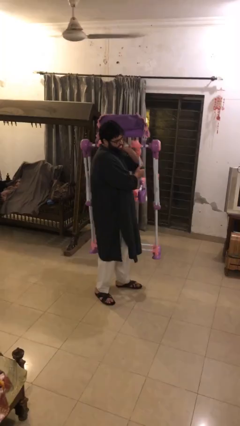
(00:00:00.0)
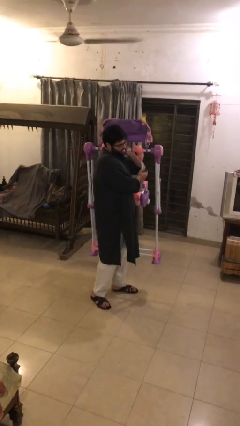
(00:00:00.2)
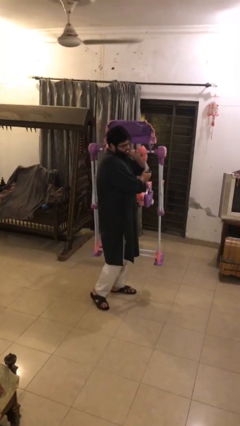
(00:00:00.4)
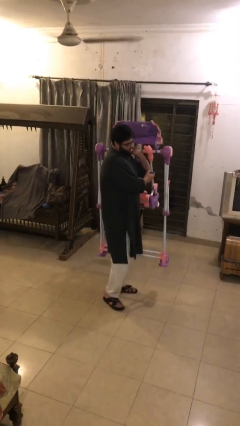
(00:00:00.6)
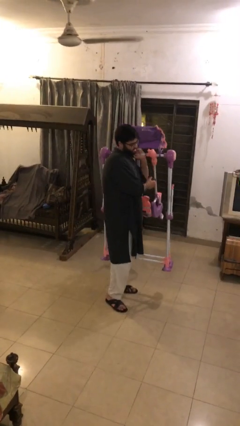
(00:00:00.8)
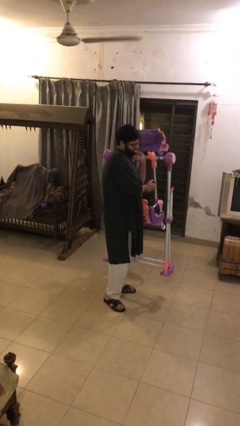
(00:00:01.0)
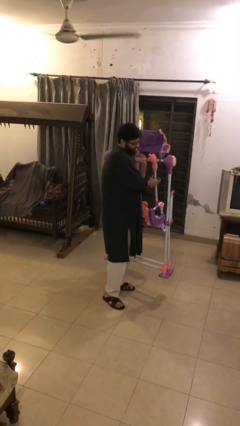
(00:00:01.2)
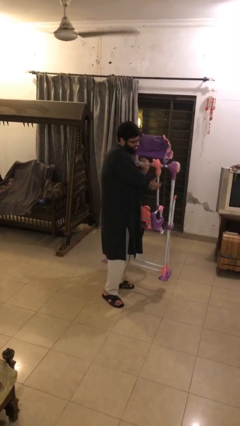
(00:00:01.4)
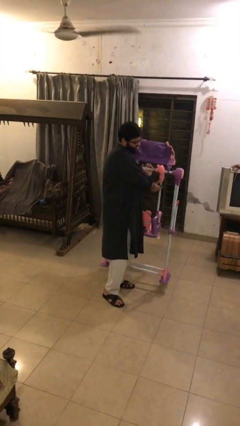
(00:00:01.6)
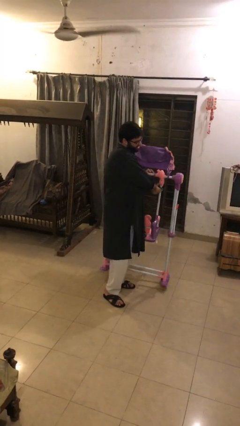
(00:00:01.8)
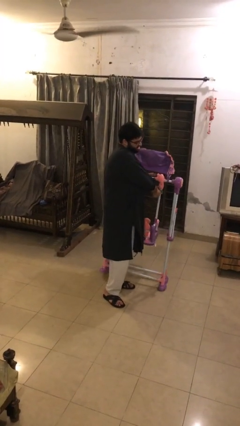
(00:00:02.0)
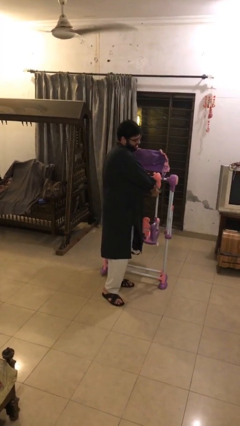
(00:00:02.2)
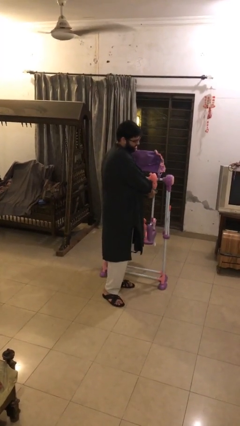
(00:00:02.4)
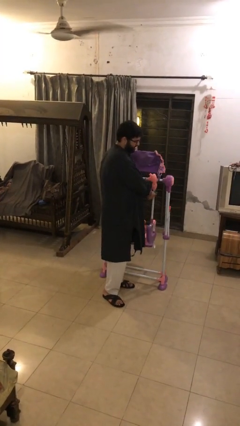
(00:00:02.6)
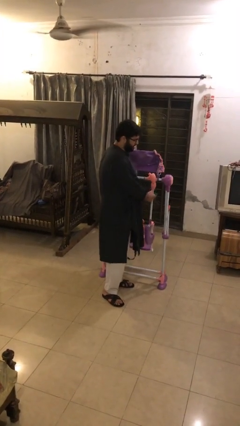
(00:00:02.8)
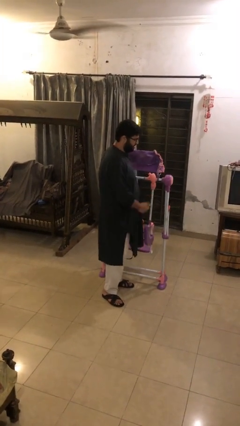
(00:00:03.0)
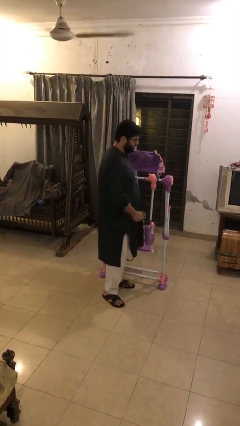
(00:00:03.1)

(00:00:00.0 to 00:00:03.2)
person puts down object on floor

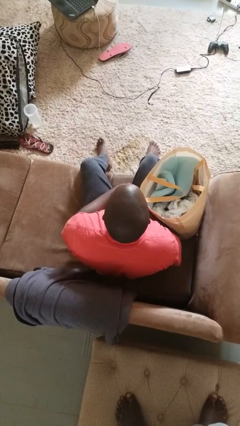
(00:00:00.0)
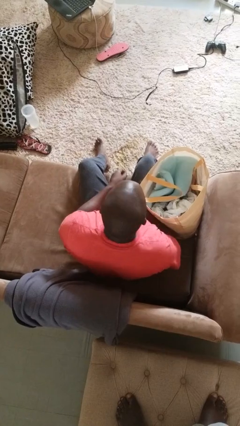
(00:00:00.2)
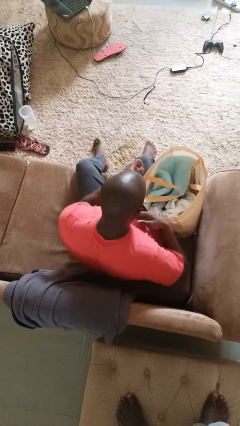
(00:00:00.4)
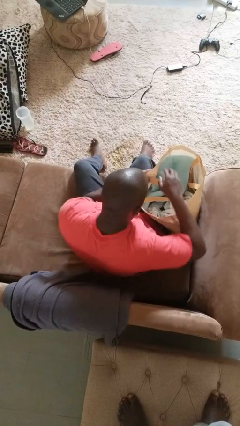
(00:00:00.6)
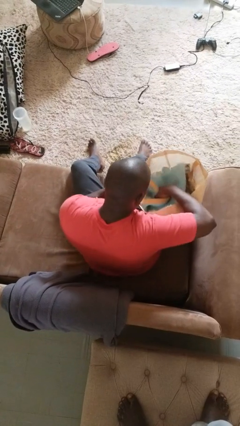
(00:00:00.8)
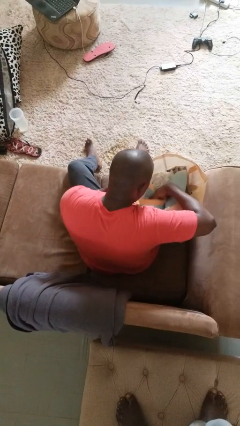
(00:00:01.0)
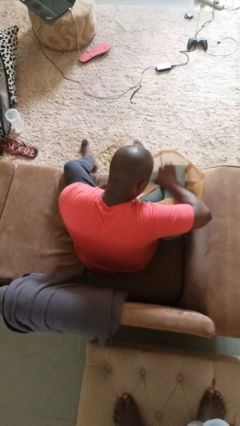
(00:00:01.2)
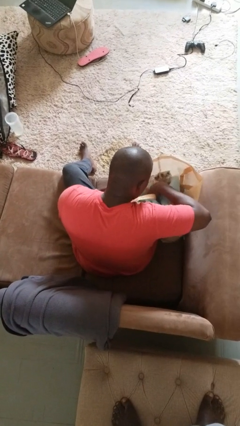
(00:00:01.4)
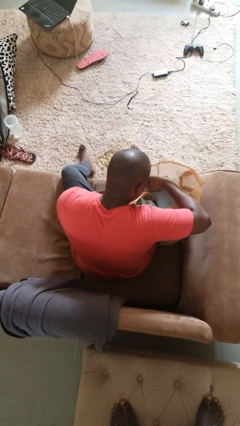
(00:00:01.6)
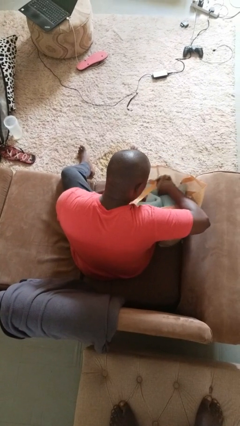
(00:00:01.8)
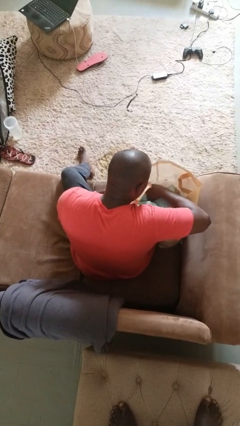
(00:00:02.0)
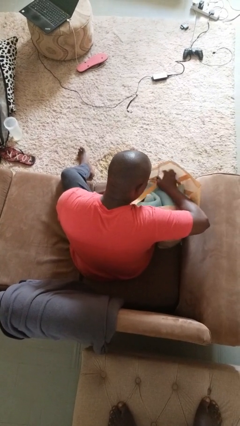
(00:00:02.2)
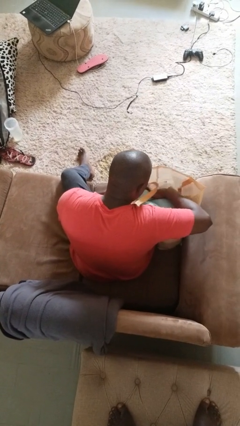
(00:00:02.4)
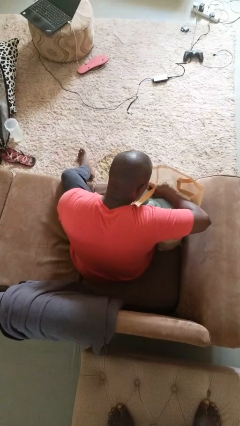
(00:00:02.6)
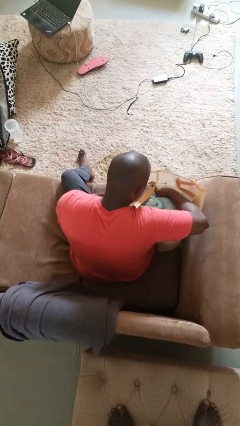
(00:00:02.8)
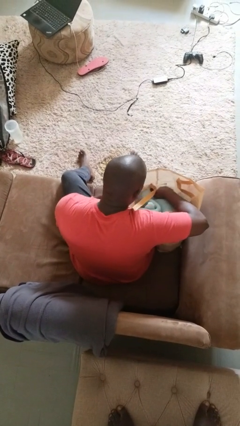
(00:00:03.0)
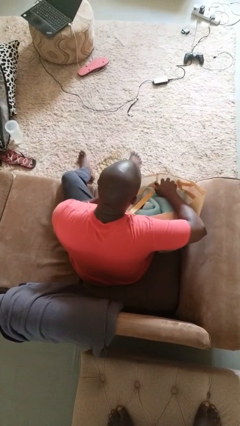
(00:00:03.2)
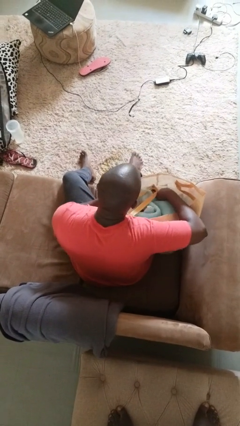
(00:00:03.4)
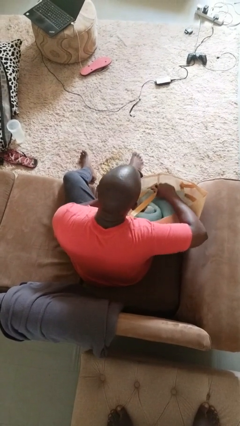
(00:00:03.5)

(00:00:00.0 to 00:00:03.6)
person searches in bag

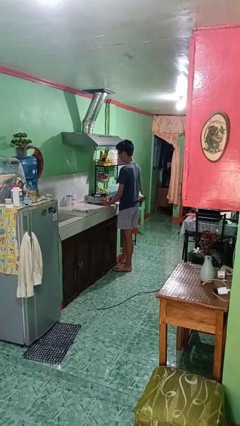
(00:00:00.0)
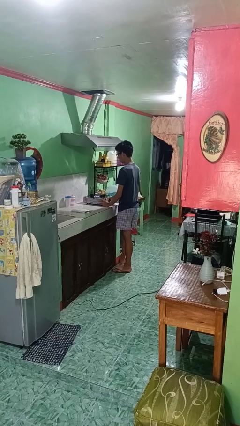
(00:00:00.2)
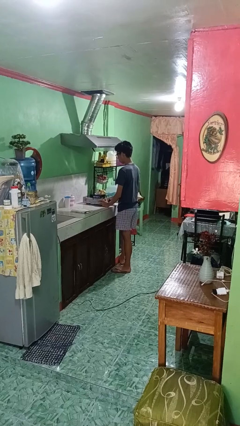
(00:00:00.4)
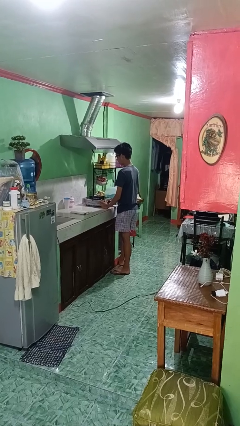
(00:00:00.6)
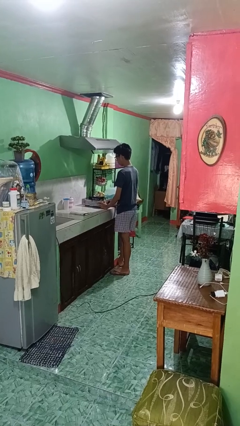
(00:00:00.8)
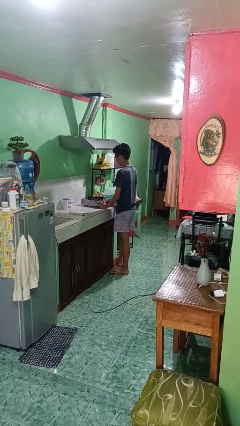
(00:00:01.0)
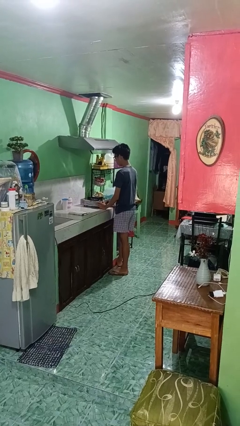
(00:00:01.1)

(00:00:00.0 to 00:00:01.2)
person turns off stovetop

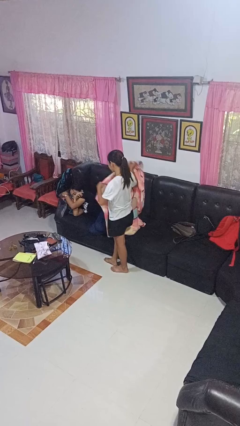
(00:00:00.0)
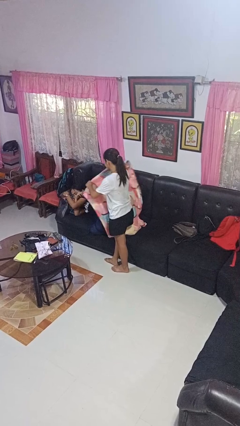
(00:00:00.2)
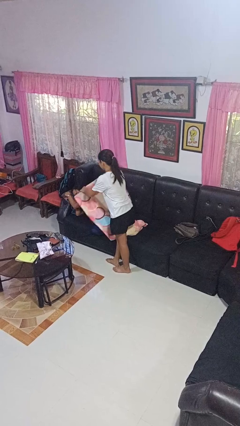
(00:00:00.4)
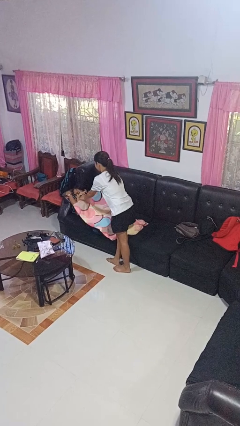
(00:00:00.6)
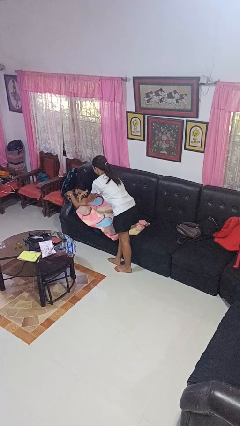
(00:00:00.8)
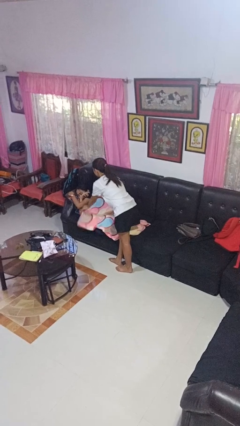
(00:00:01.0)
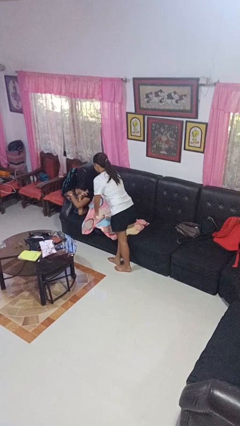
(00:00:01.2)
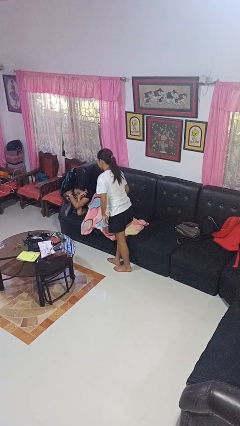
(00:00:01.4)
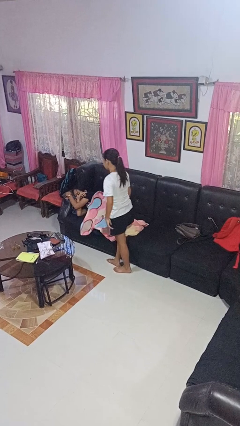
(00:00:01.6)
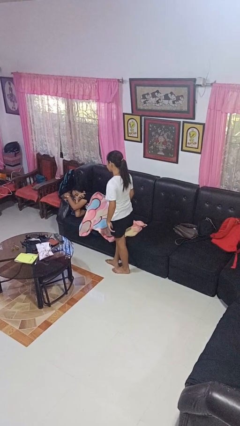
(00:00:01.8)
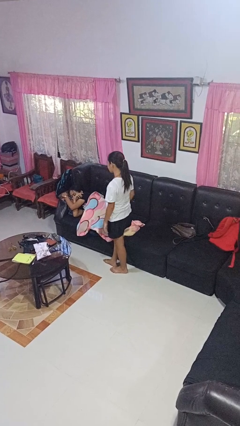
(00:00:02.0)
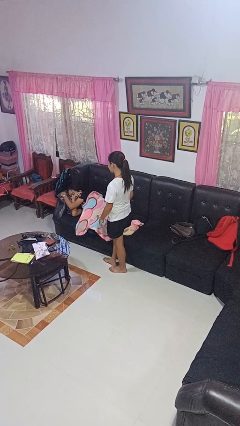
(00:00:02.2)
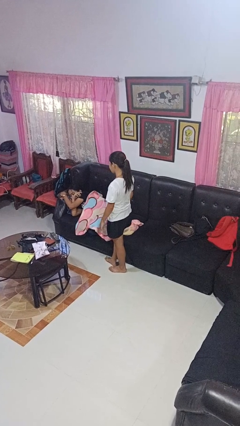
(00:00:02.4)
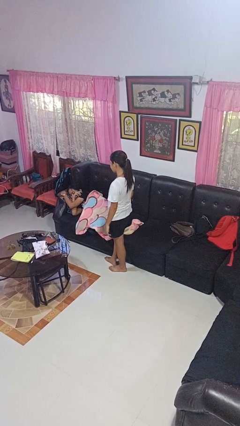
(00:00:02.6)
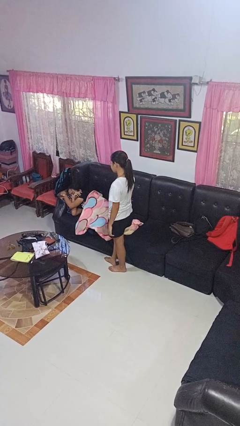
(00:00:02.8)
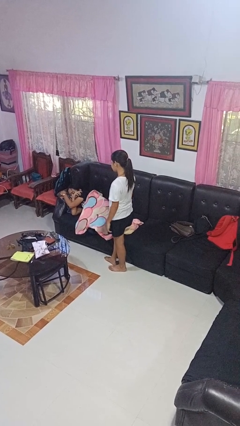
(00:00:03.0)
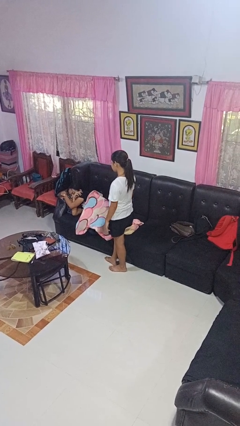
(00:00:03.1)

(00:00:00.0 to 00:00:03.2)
person covers friend with blanket

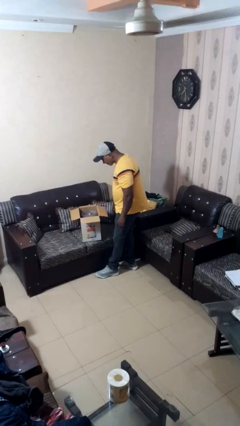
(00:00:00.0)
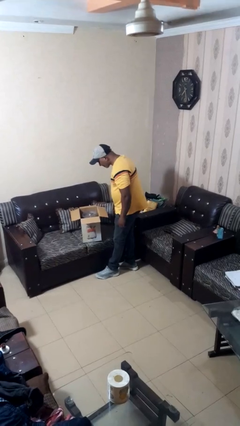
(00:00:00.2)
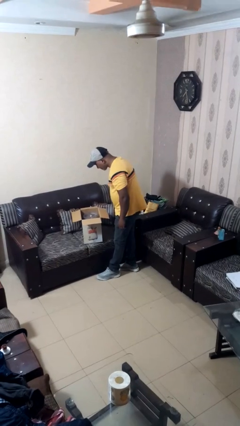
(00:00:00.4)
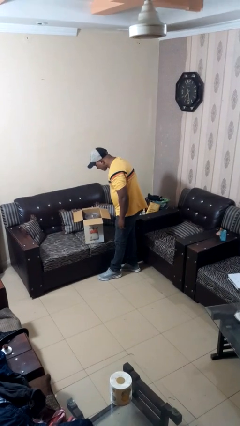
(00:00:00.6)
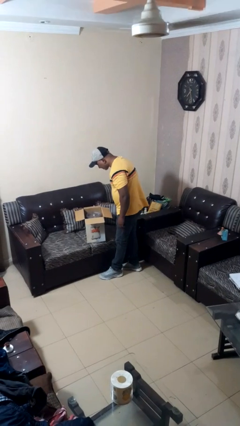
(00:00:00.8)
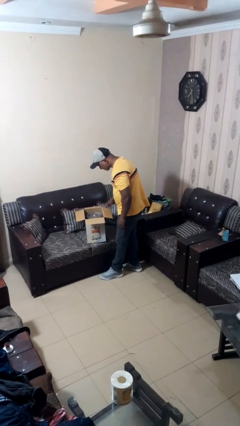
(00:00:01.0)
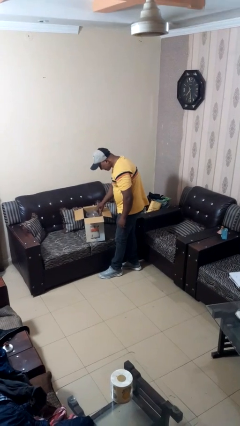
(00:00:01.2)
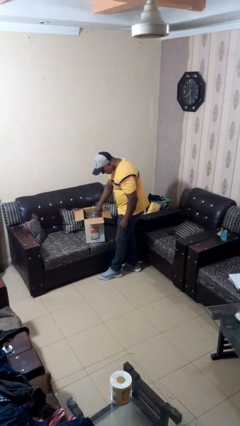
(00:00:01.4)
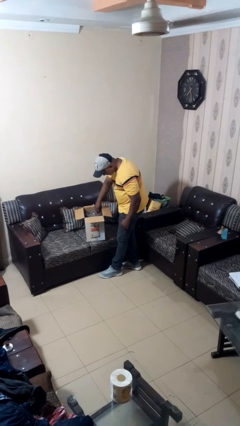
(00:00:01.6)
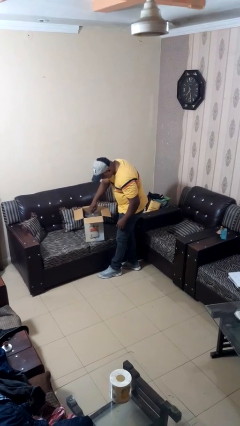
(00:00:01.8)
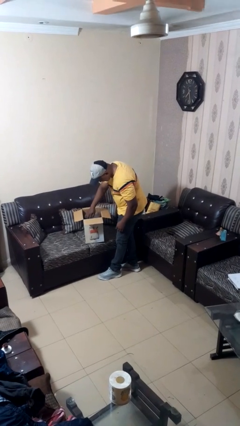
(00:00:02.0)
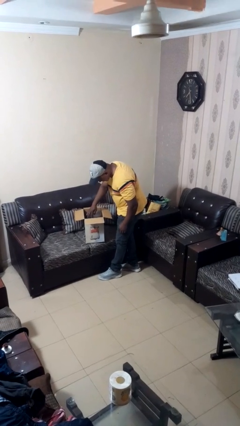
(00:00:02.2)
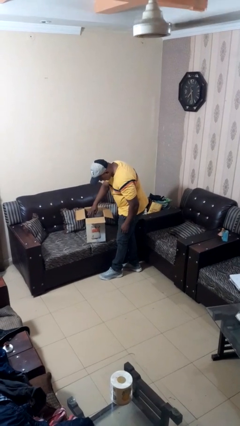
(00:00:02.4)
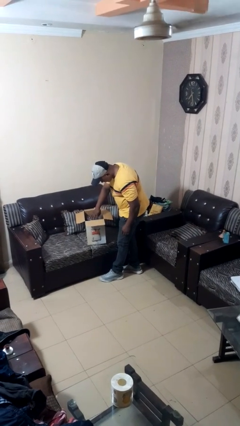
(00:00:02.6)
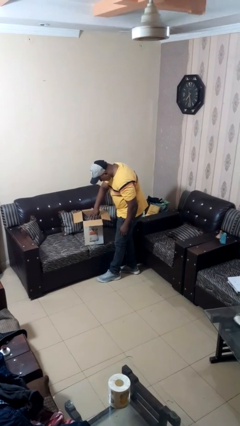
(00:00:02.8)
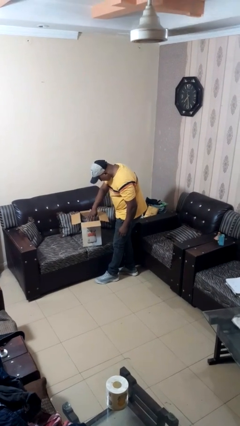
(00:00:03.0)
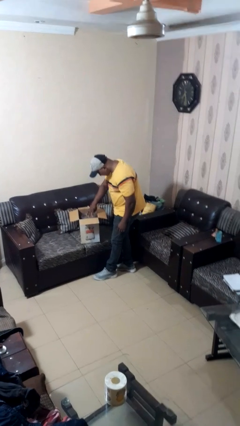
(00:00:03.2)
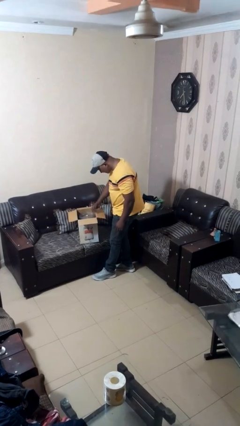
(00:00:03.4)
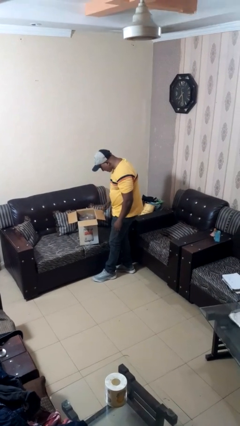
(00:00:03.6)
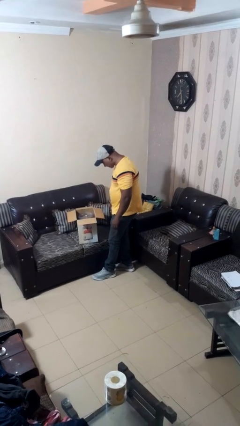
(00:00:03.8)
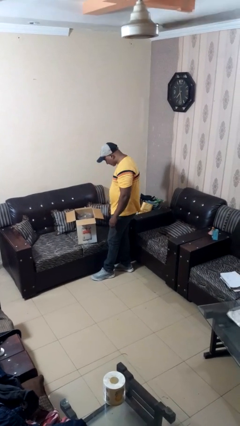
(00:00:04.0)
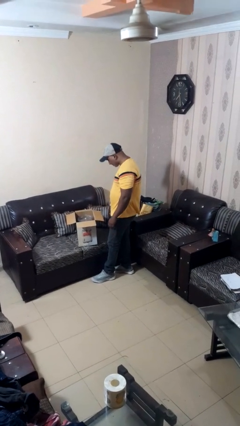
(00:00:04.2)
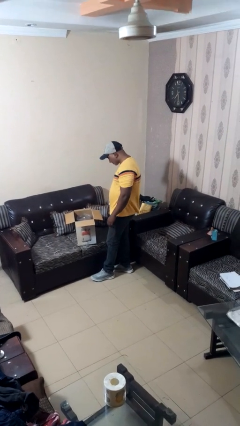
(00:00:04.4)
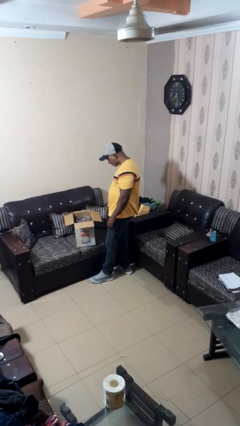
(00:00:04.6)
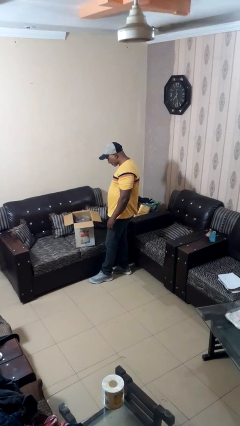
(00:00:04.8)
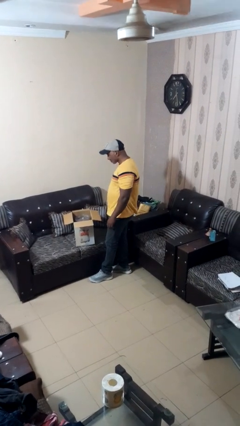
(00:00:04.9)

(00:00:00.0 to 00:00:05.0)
person searches in box

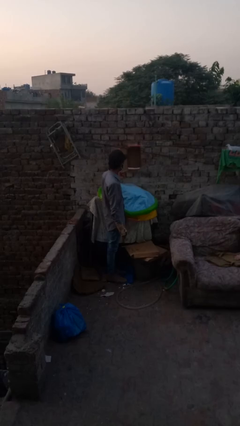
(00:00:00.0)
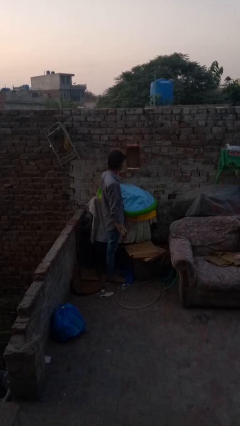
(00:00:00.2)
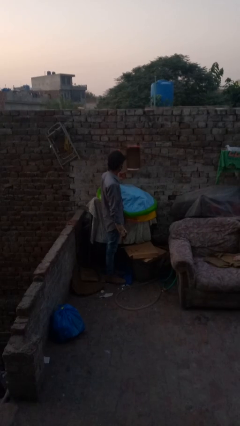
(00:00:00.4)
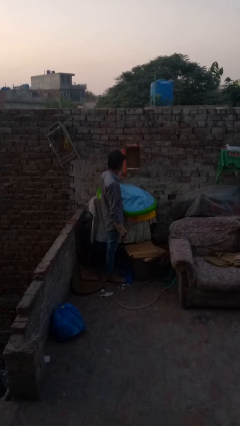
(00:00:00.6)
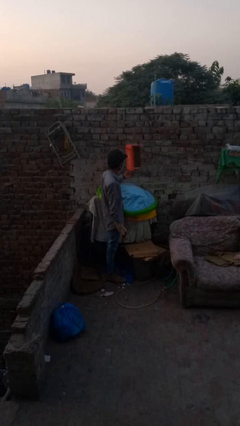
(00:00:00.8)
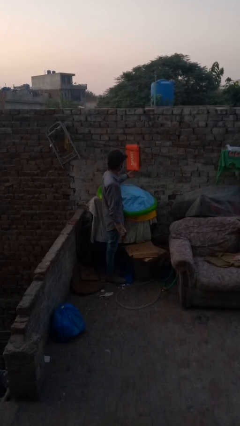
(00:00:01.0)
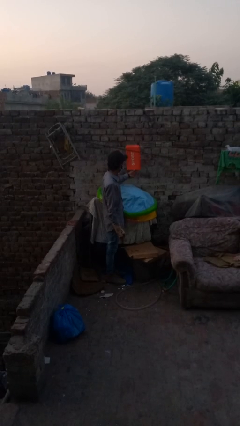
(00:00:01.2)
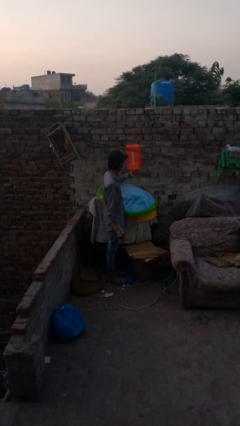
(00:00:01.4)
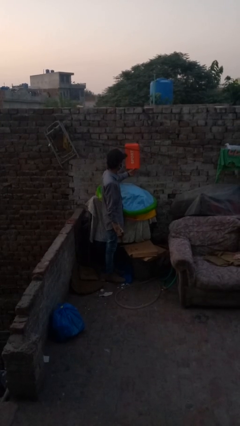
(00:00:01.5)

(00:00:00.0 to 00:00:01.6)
person closes mailbox
